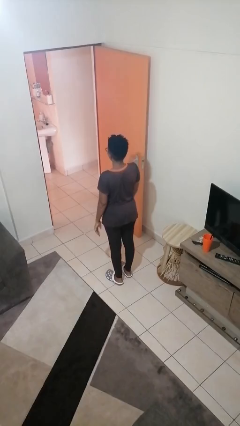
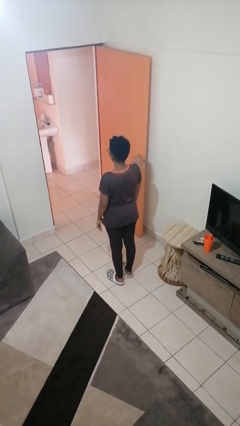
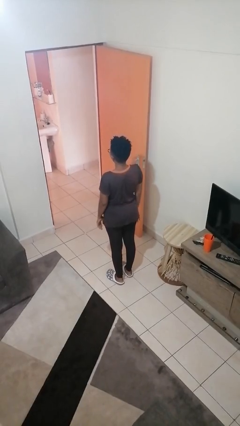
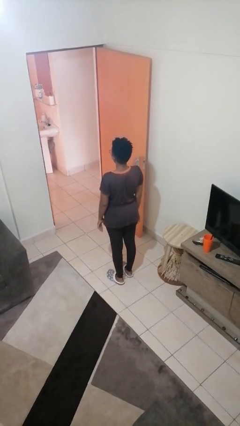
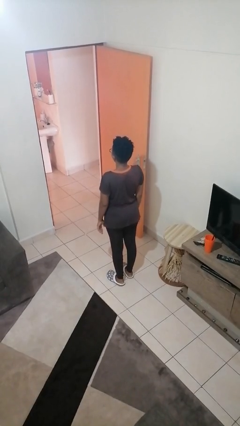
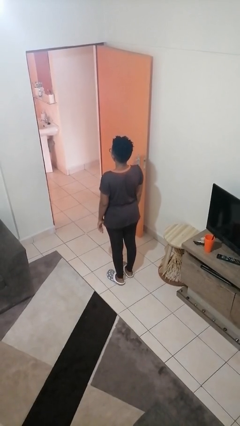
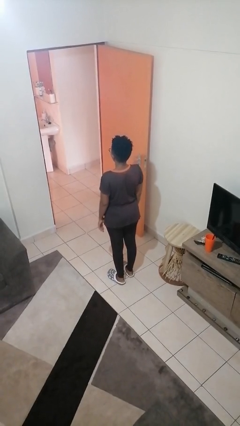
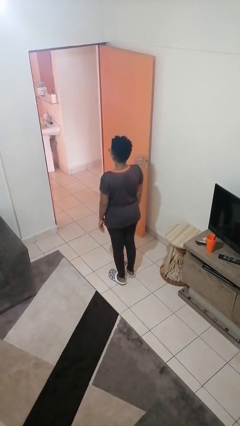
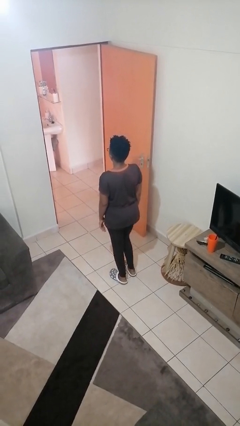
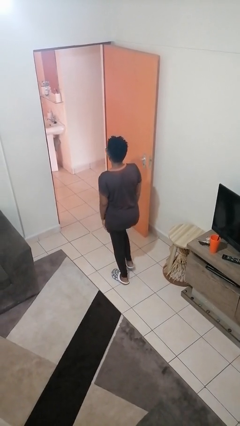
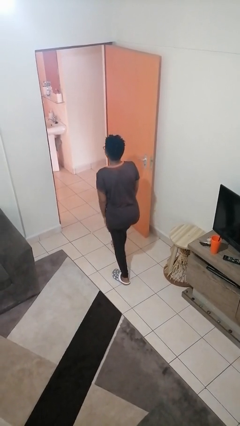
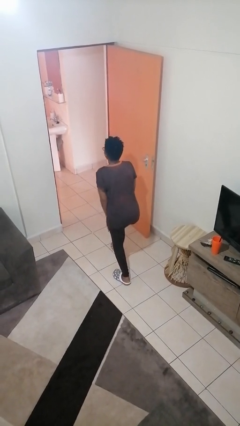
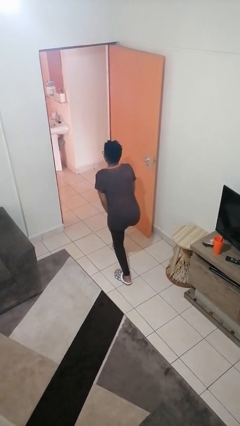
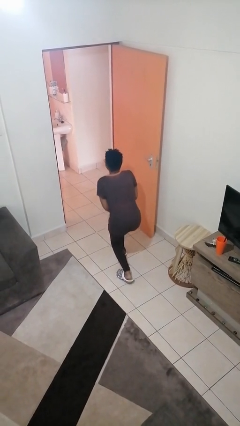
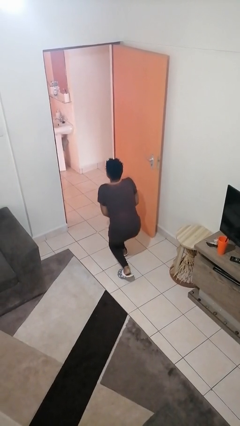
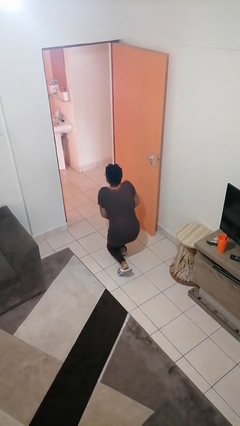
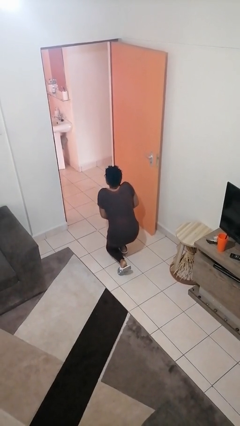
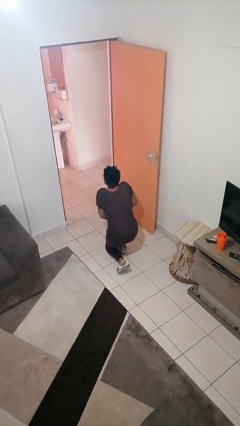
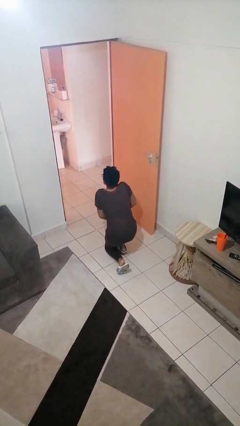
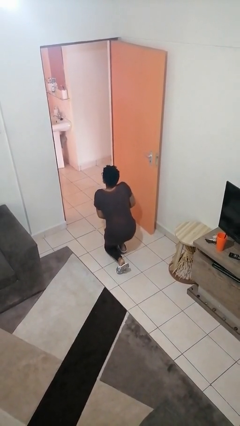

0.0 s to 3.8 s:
person kneels

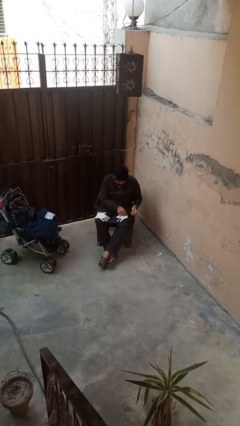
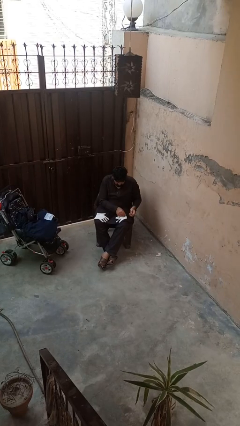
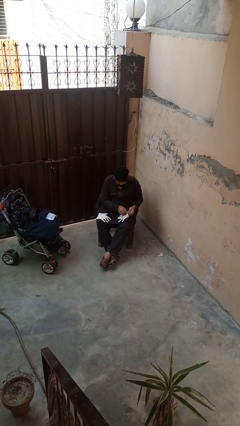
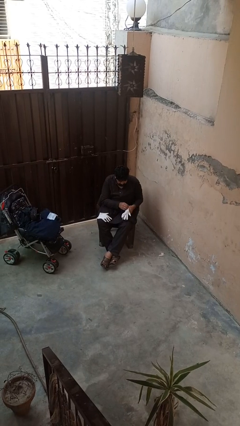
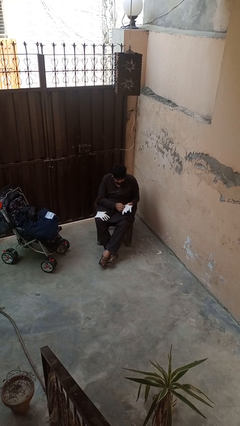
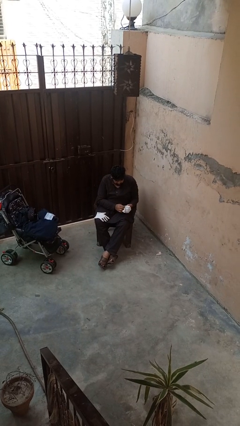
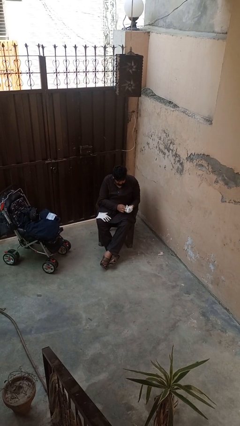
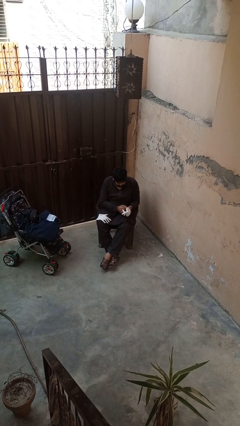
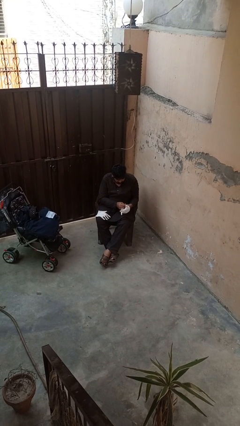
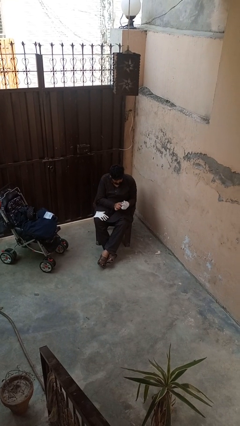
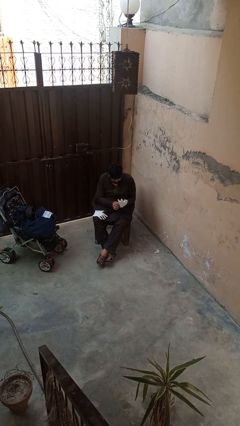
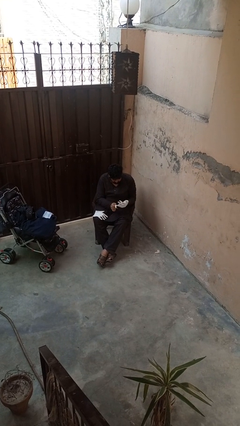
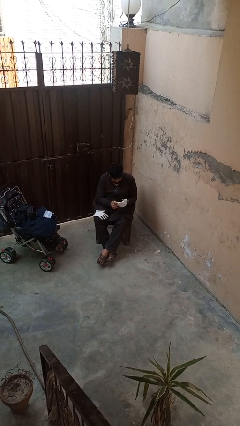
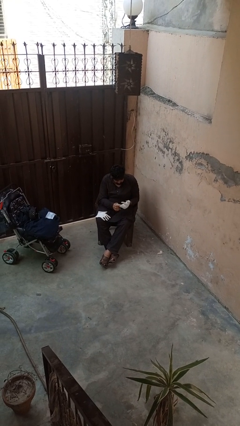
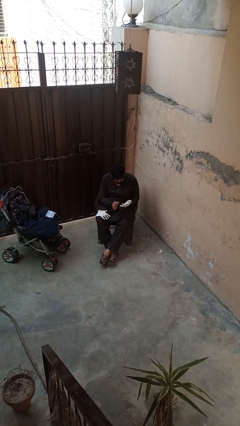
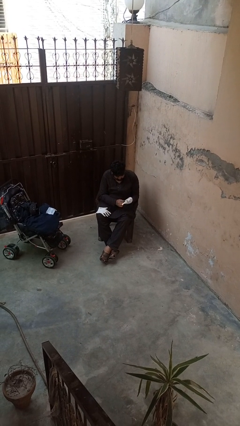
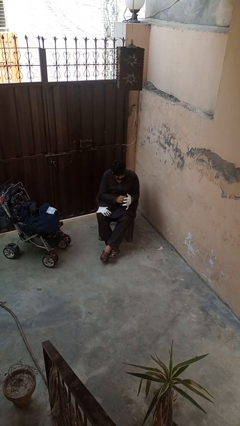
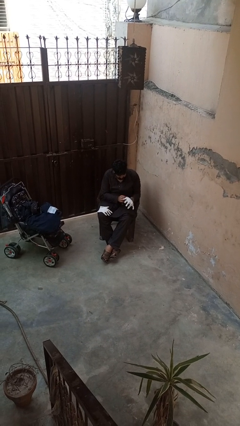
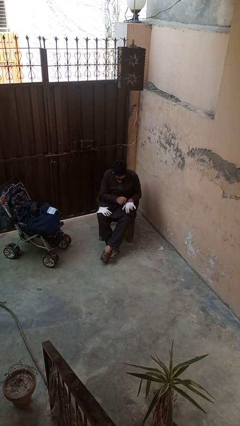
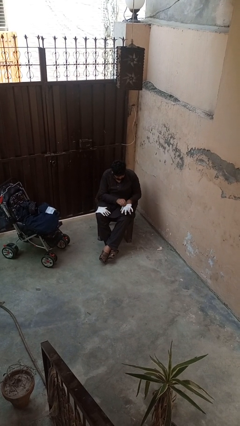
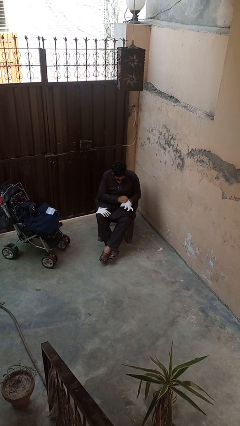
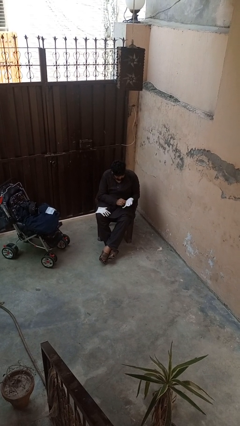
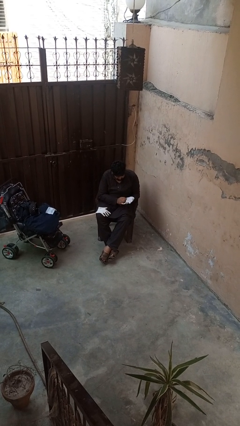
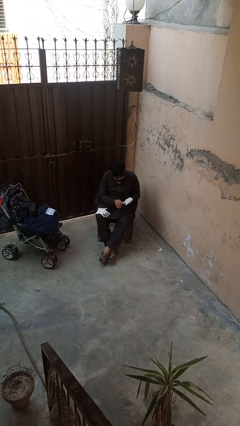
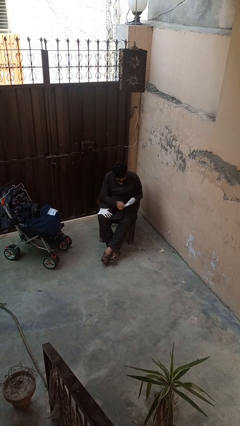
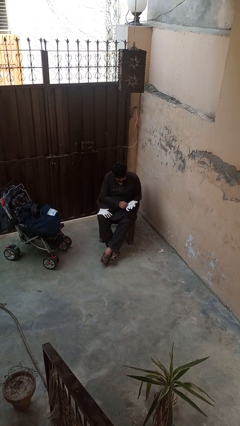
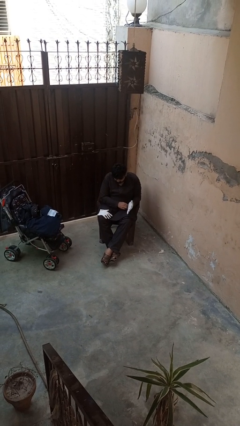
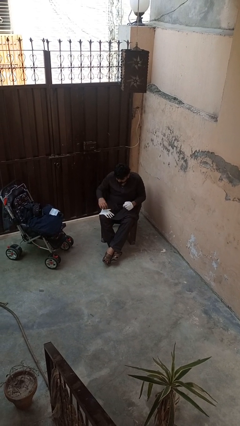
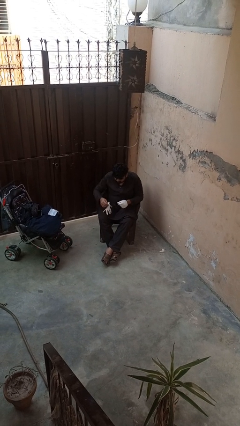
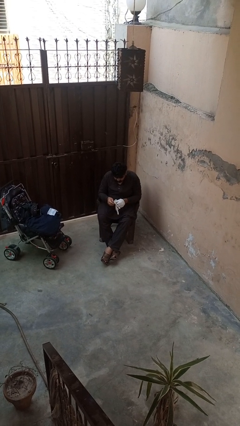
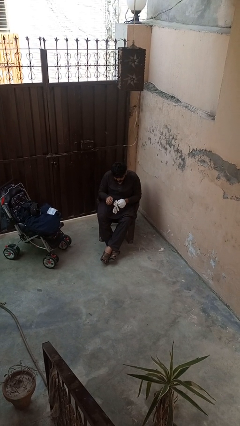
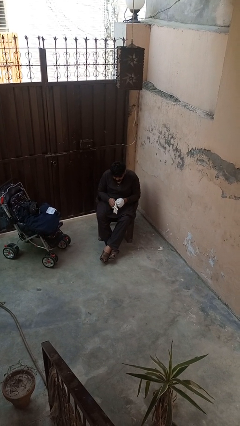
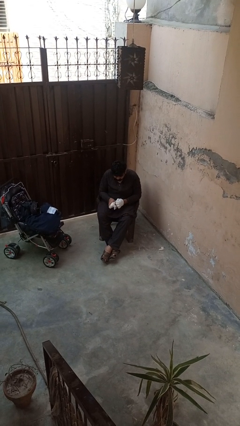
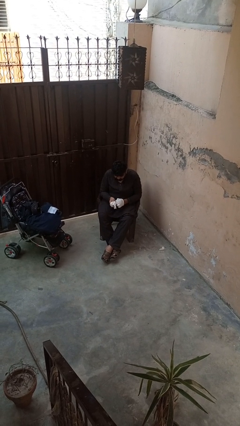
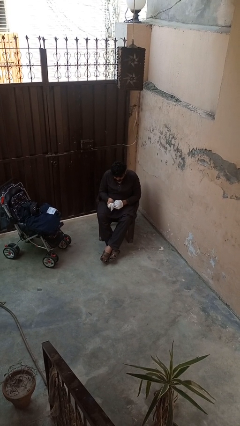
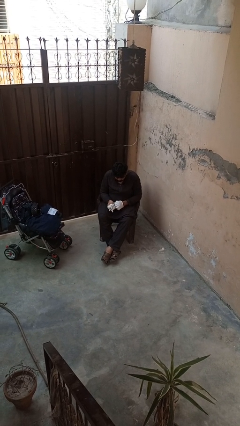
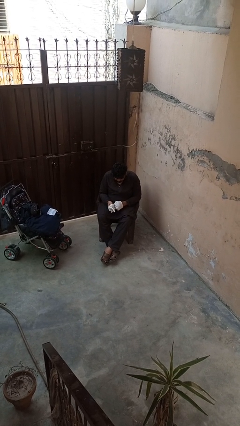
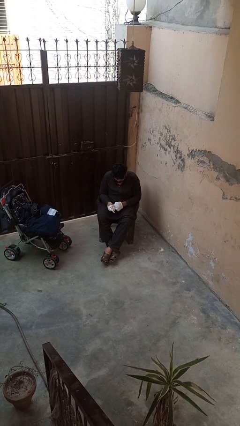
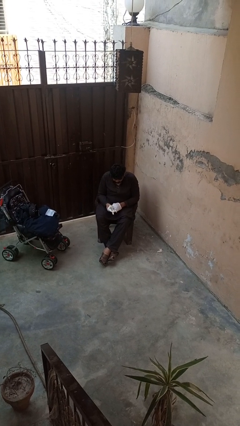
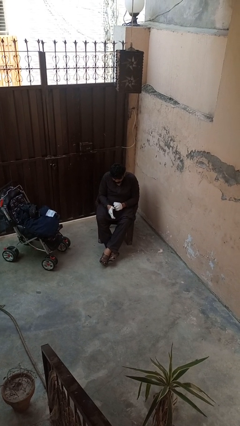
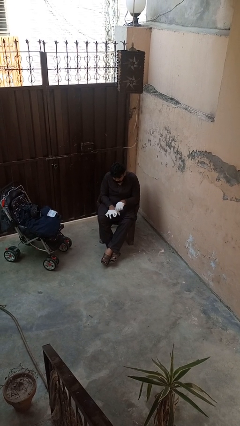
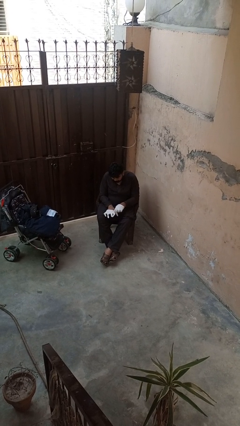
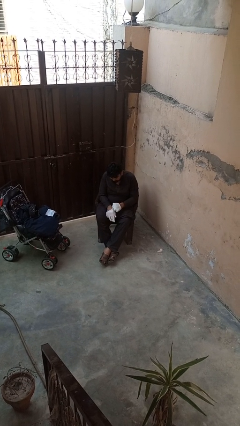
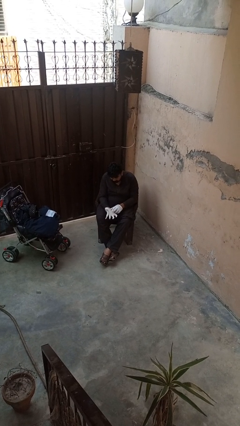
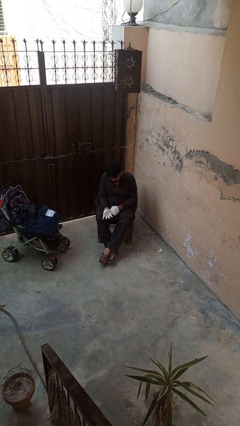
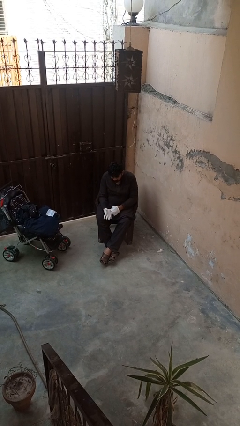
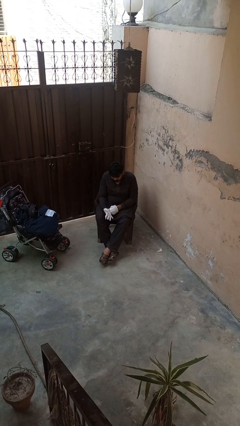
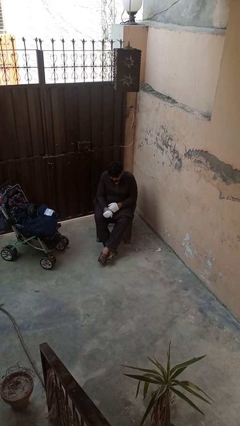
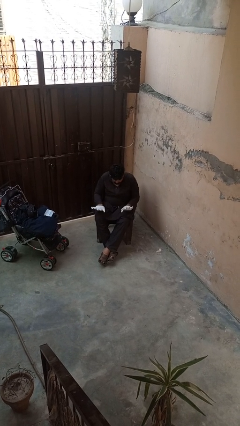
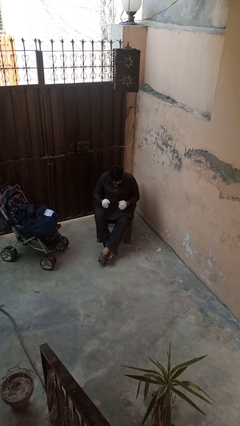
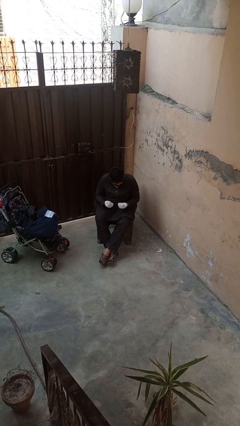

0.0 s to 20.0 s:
person puts on gloves

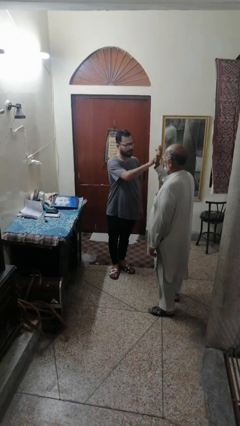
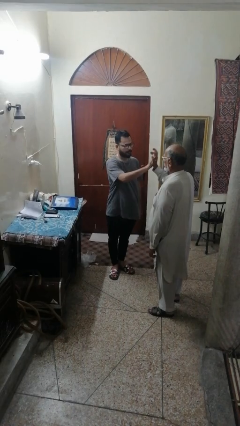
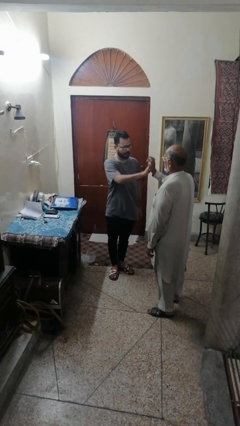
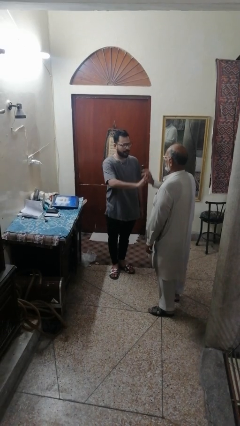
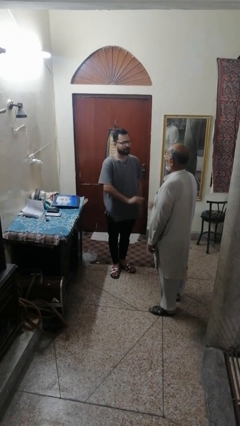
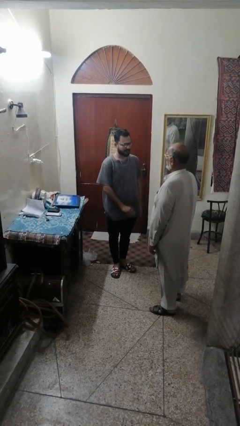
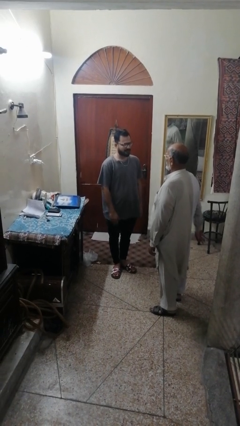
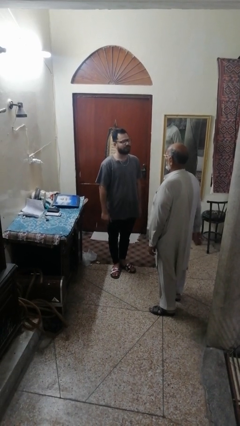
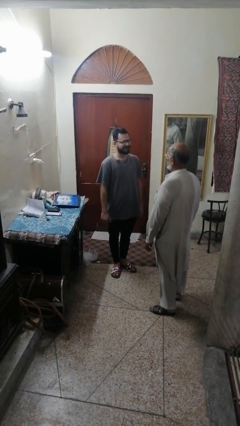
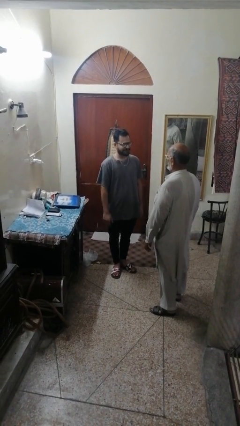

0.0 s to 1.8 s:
person highfives hand

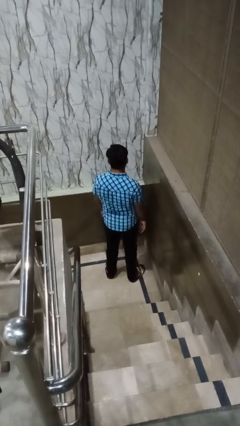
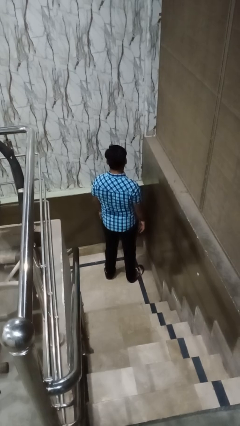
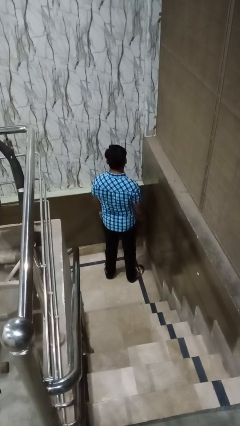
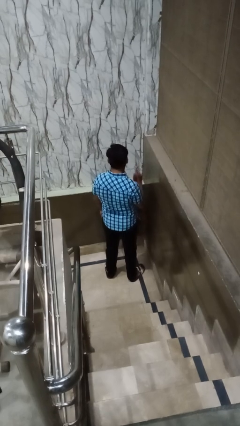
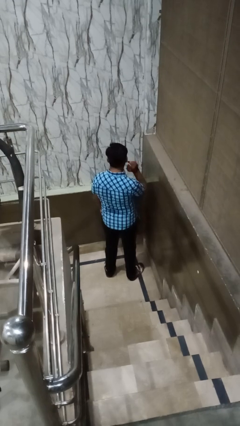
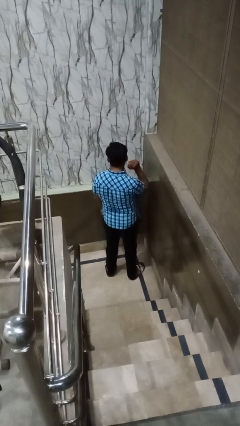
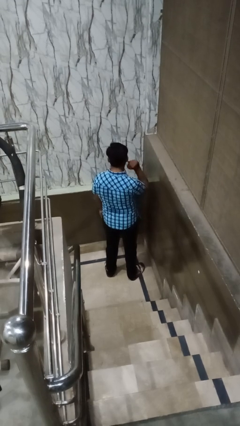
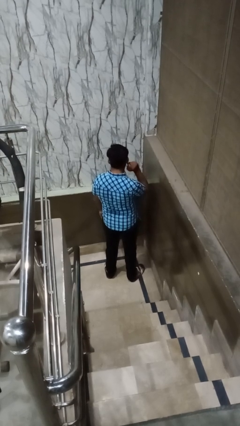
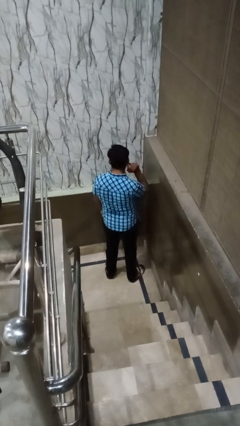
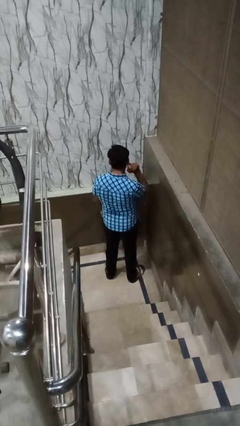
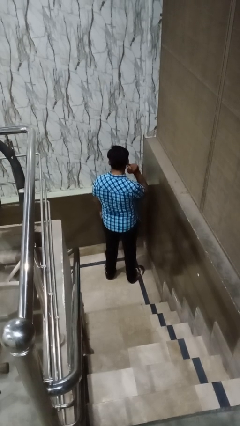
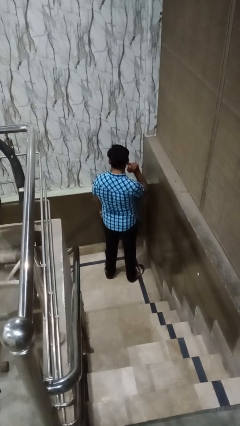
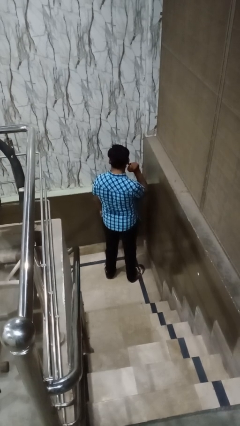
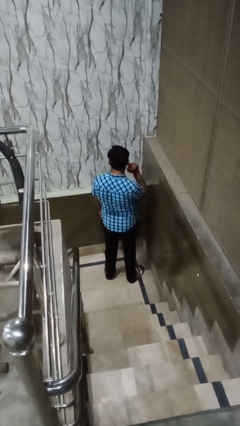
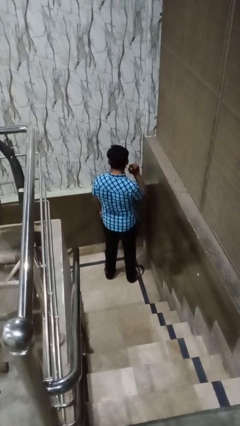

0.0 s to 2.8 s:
person touches earlobe
